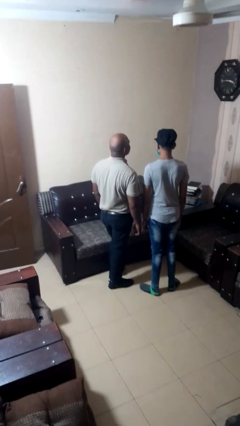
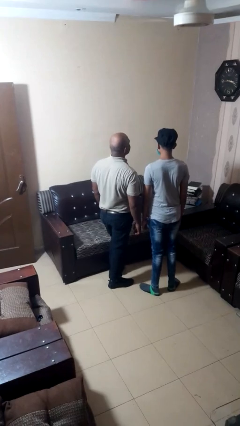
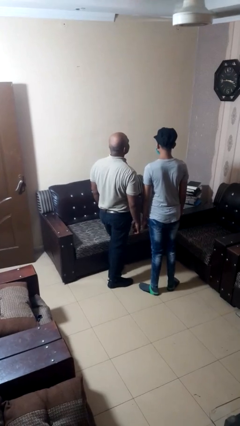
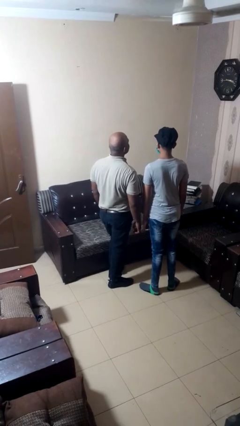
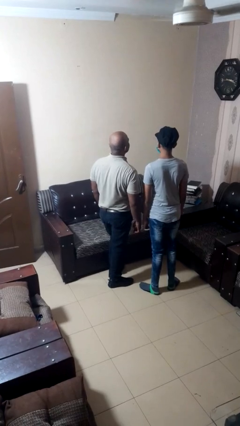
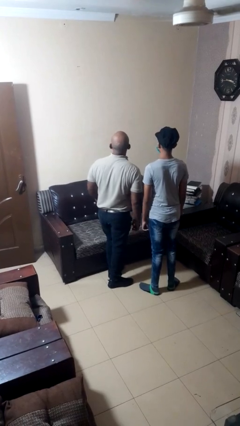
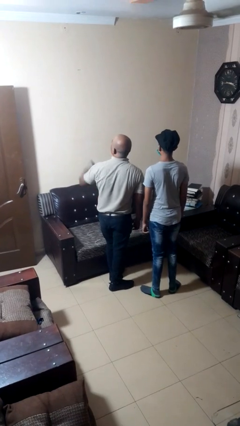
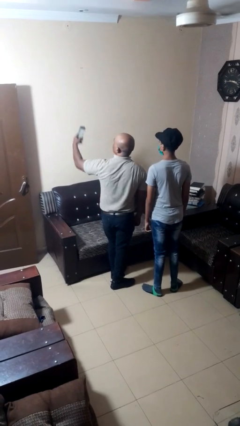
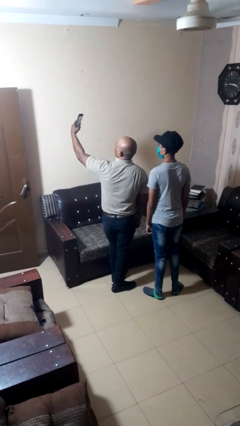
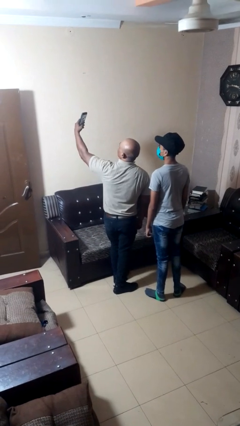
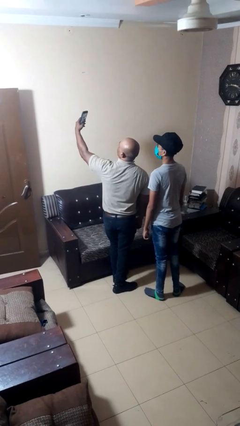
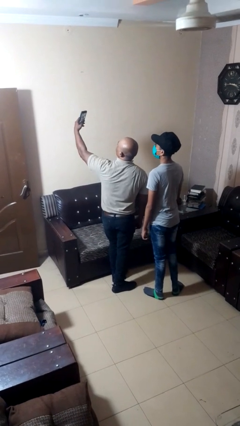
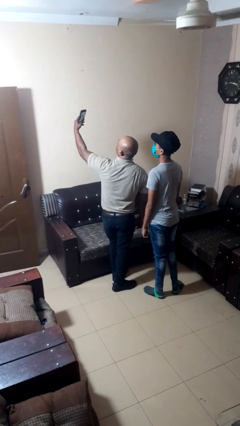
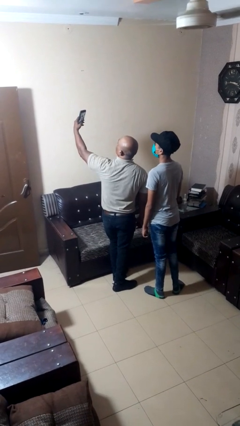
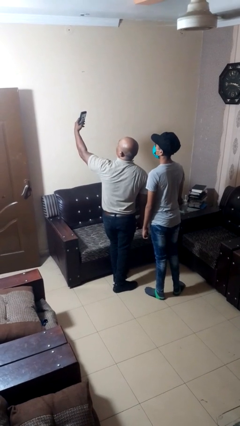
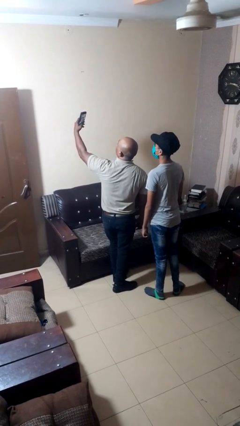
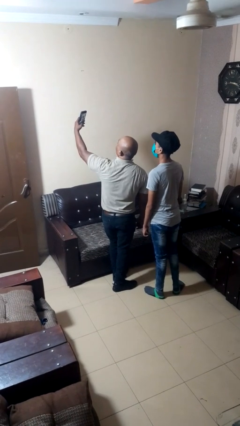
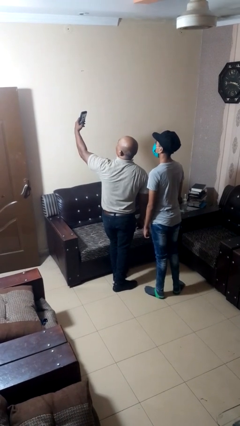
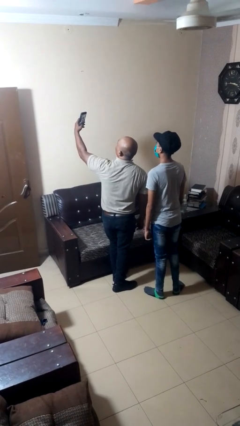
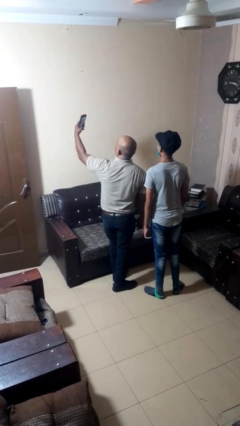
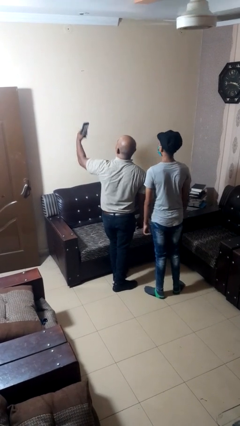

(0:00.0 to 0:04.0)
person takes selfie with person

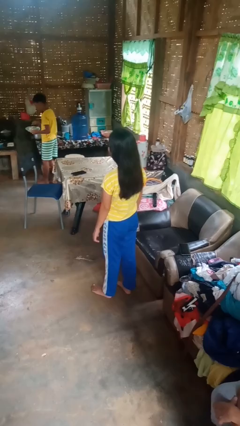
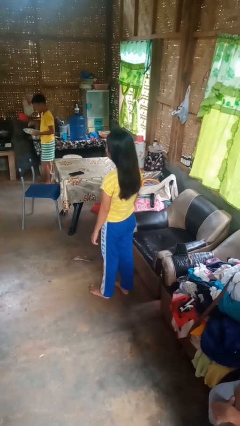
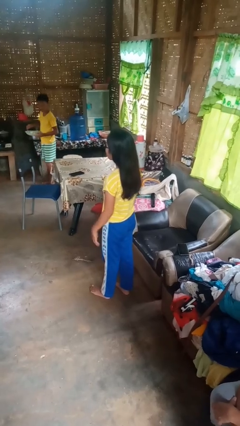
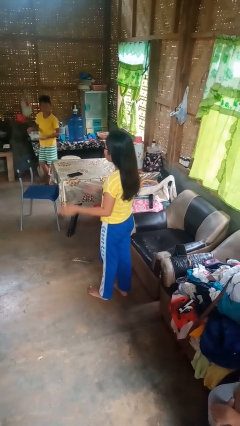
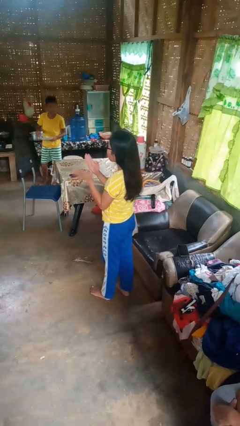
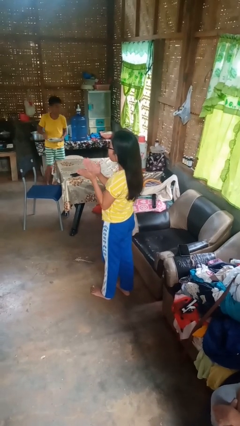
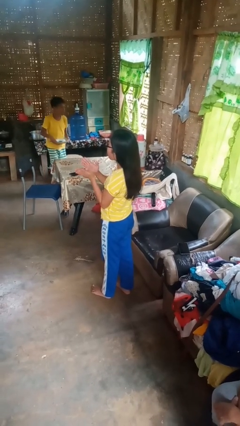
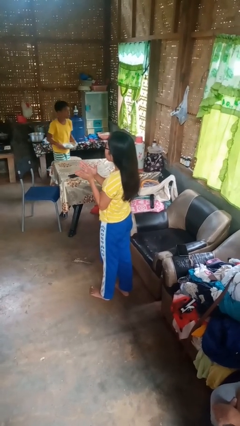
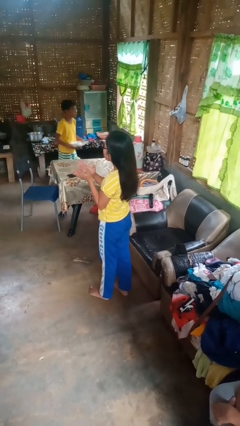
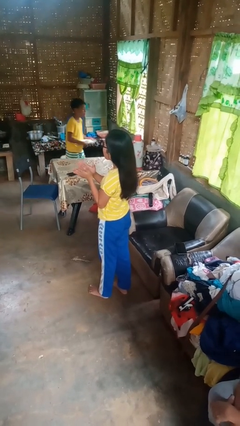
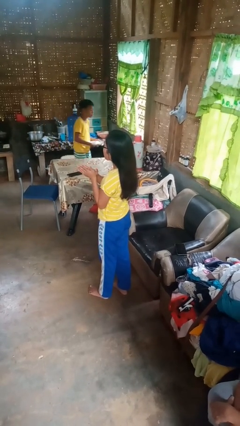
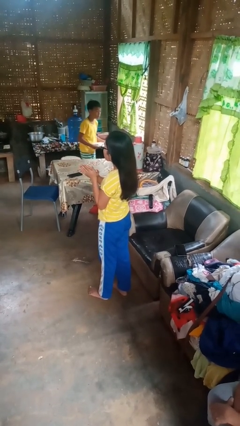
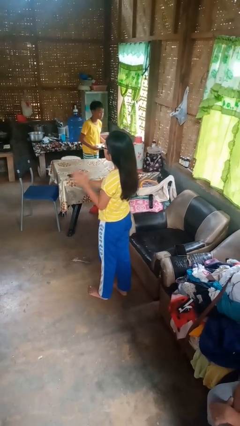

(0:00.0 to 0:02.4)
person claps hands

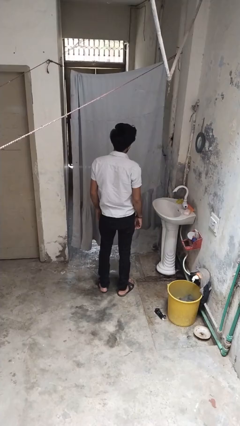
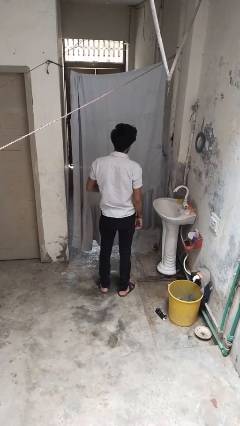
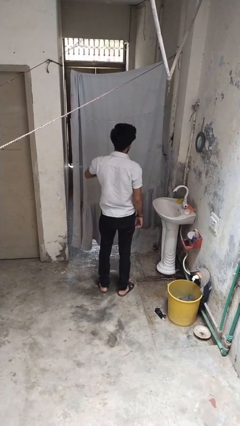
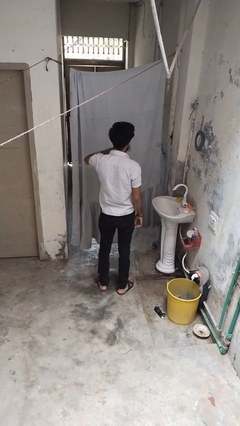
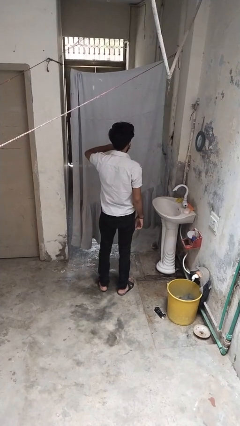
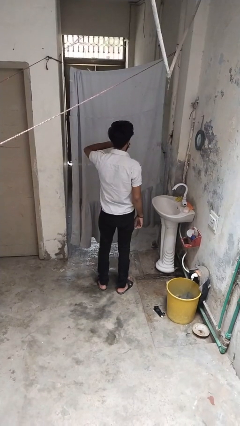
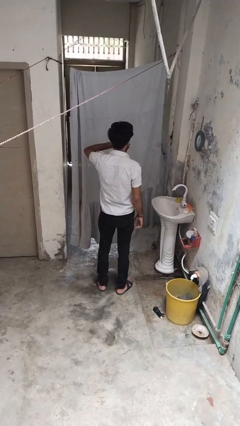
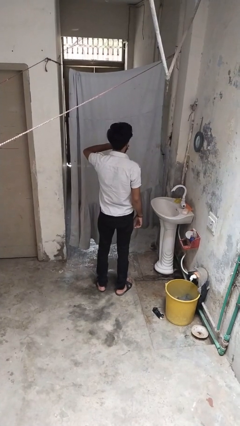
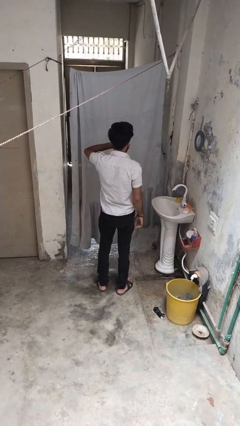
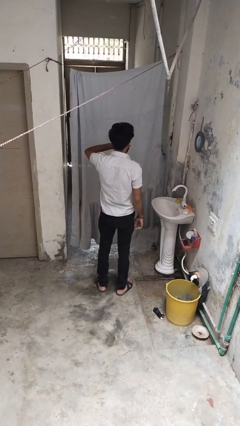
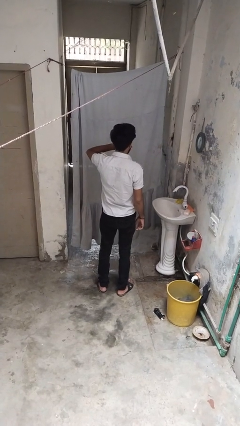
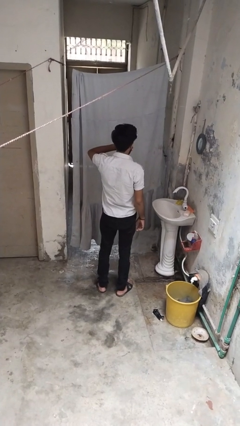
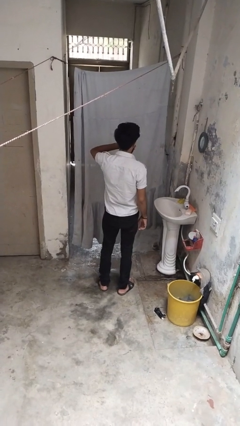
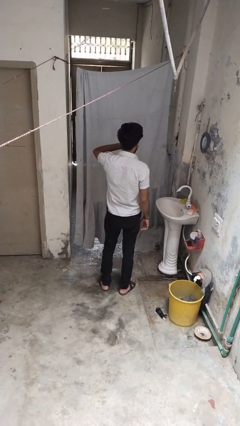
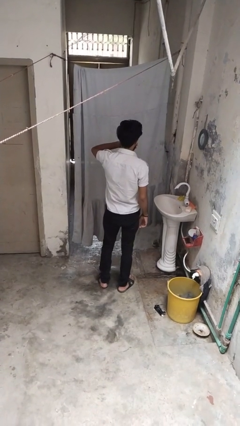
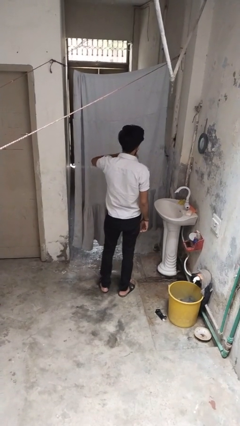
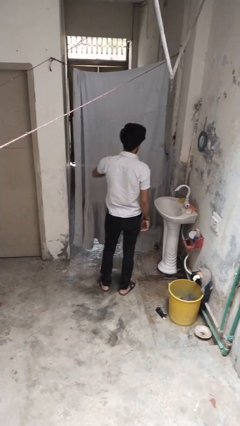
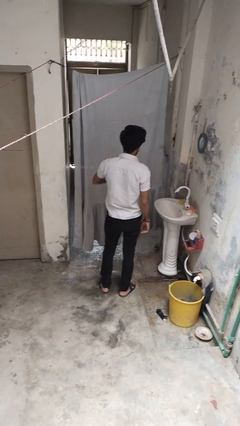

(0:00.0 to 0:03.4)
person yawns

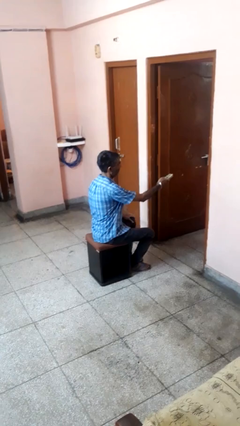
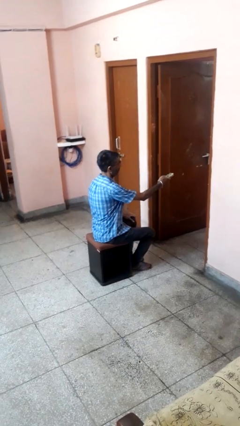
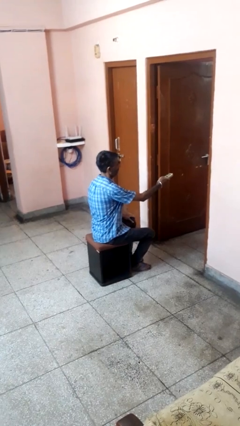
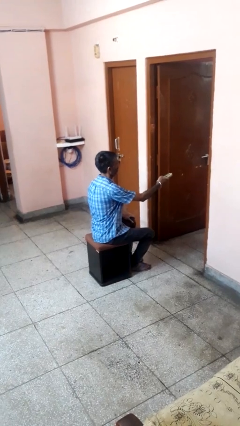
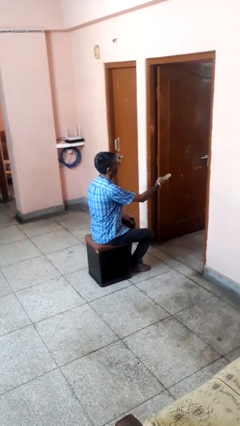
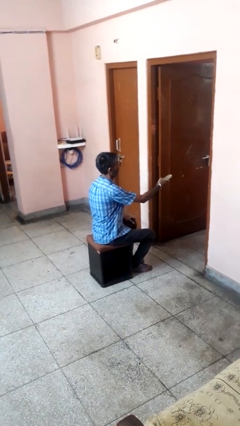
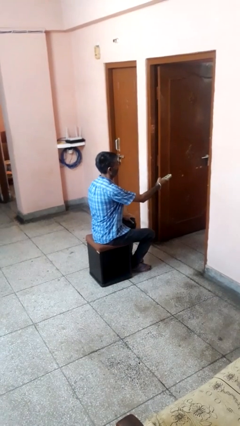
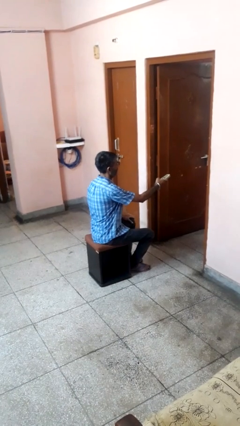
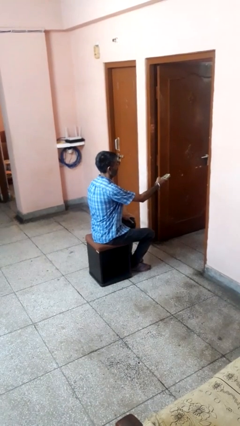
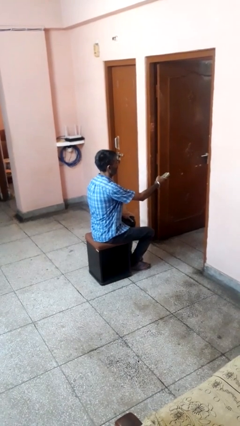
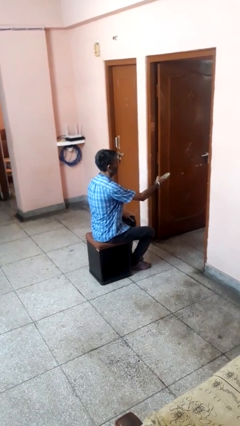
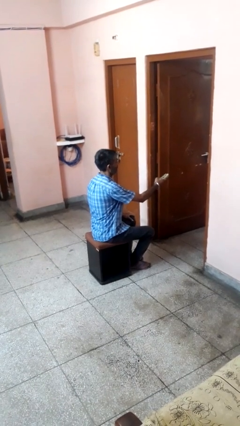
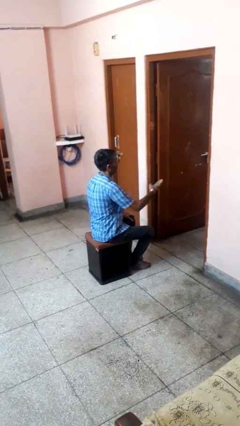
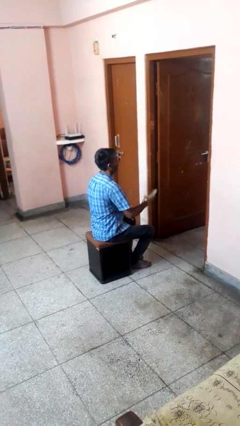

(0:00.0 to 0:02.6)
person uses television remote

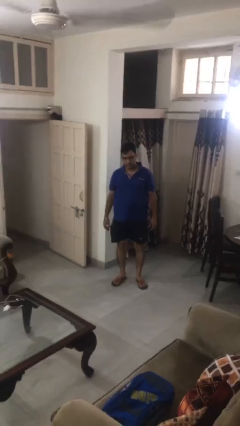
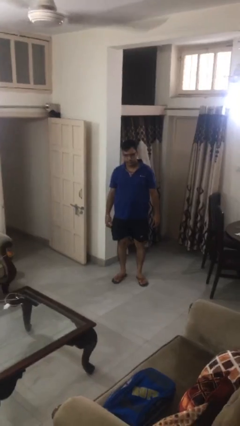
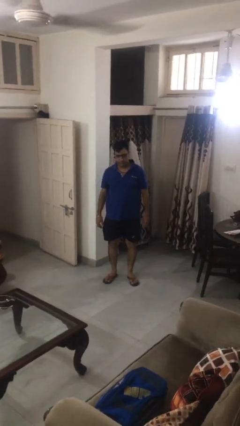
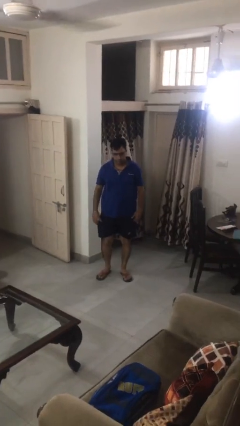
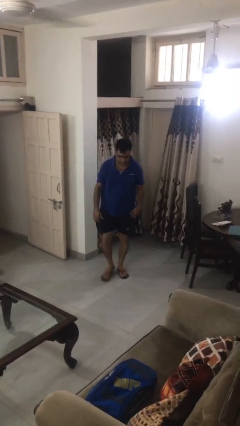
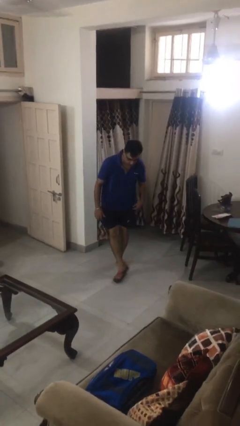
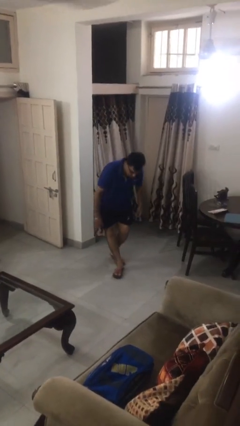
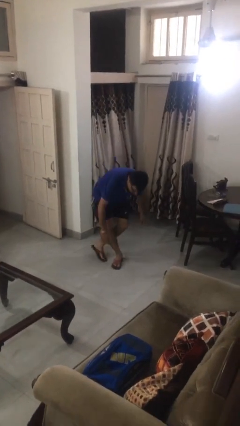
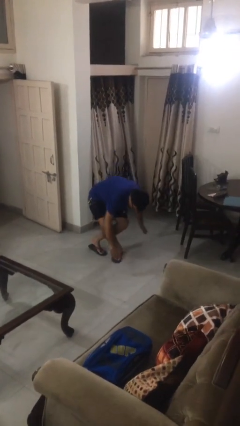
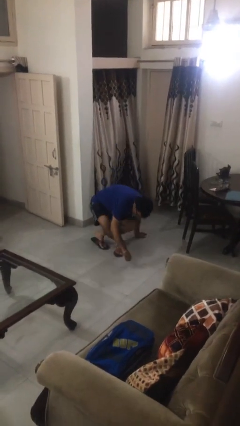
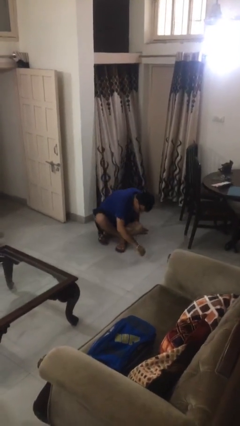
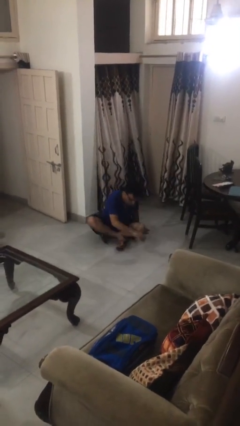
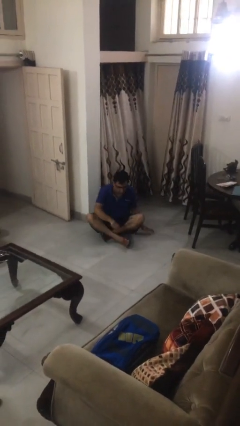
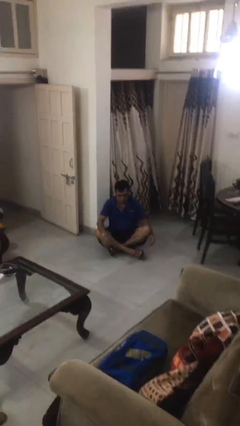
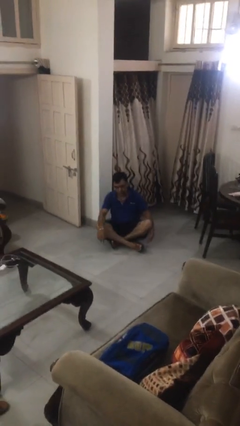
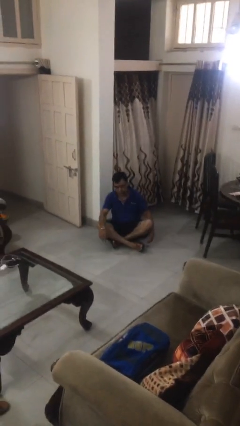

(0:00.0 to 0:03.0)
person sits crisscross

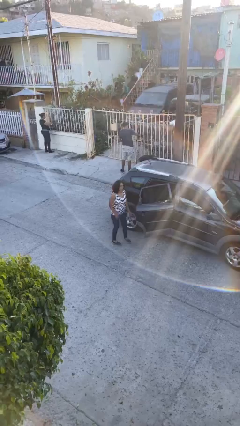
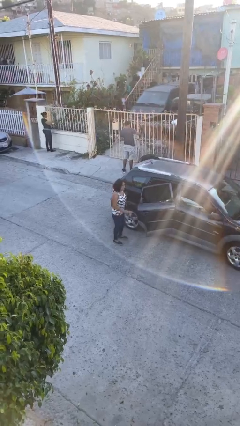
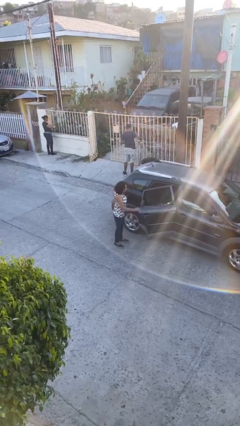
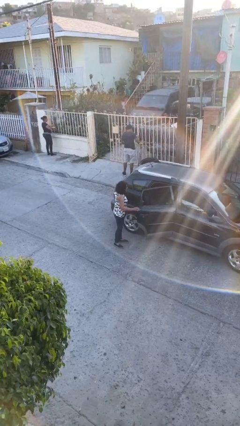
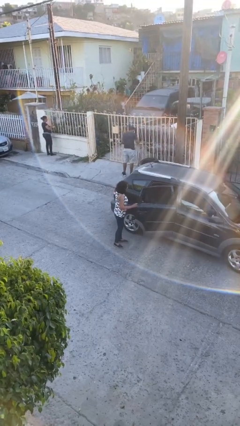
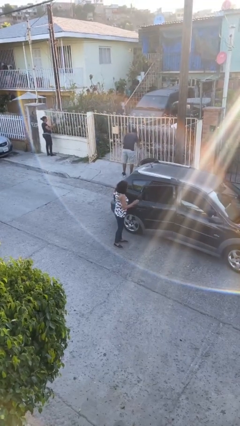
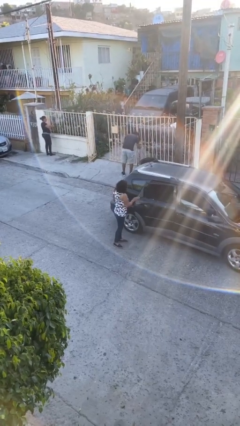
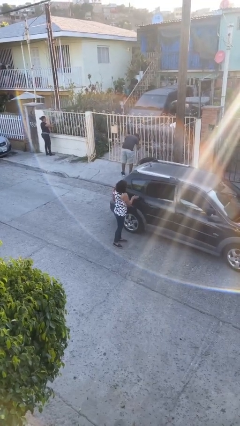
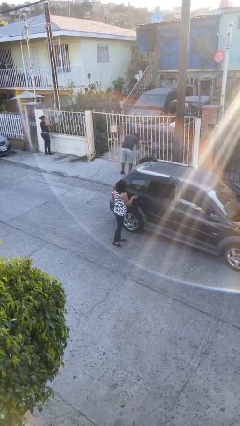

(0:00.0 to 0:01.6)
person closes car door

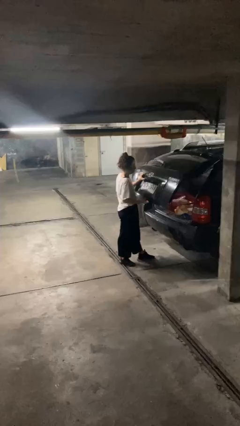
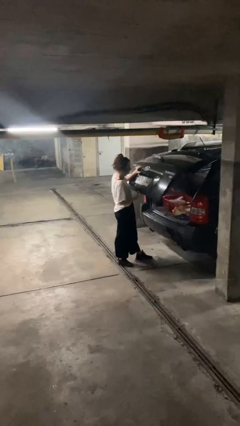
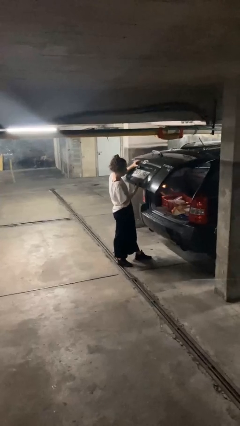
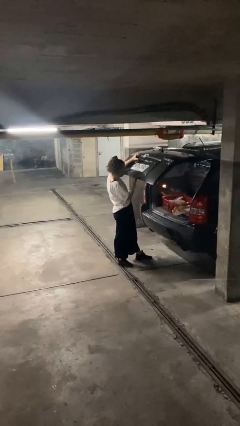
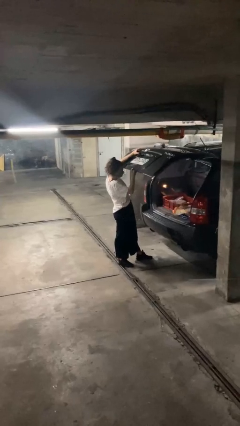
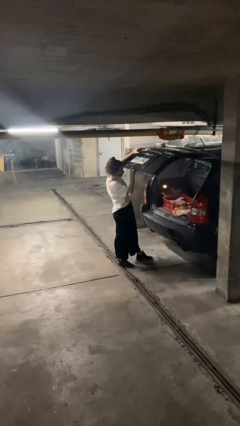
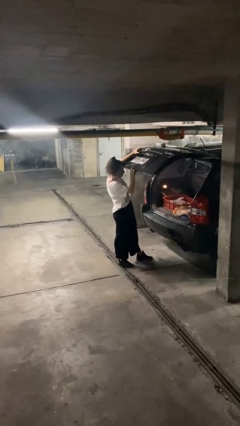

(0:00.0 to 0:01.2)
person opens car trunk
